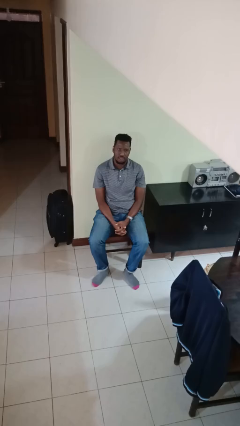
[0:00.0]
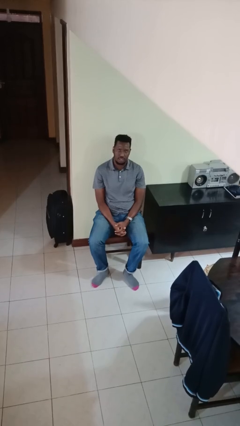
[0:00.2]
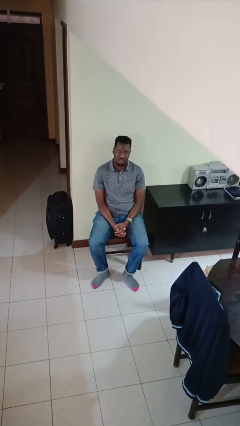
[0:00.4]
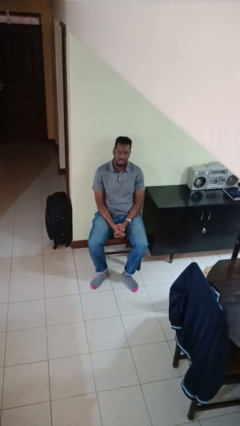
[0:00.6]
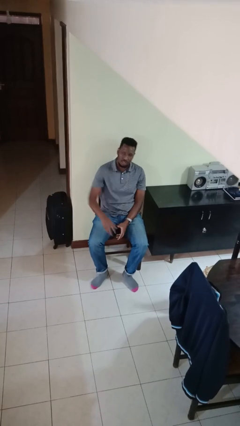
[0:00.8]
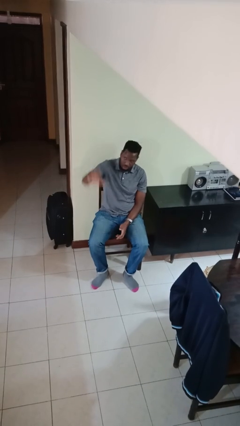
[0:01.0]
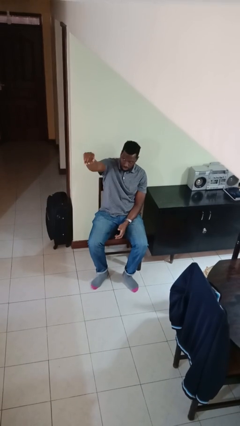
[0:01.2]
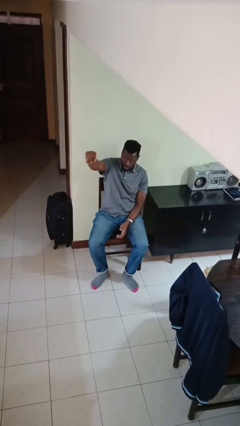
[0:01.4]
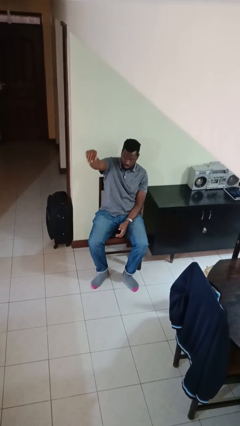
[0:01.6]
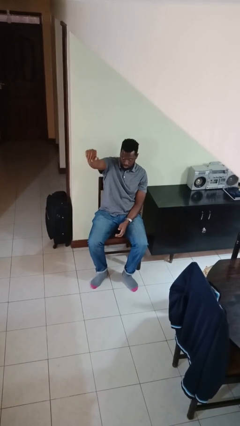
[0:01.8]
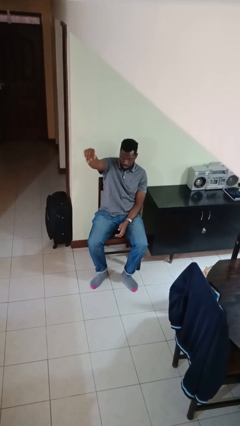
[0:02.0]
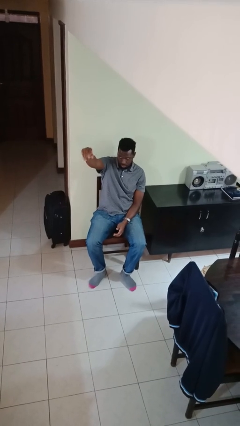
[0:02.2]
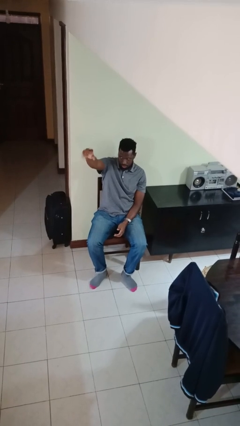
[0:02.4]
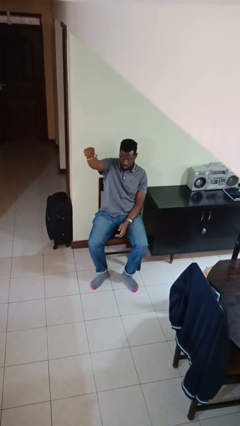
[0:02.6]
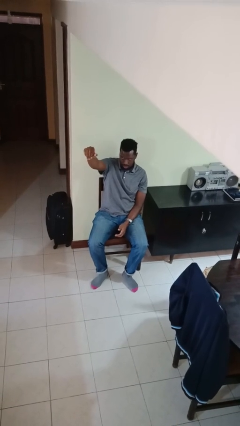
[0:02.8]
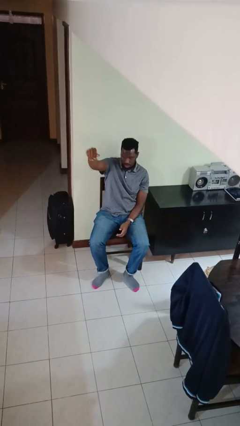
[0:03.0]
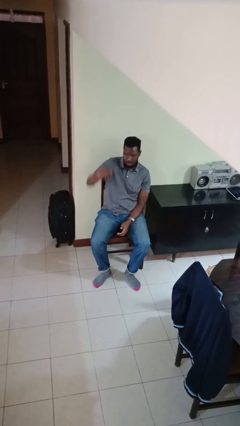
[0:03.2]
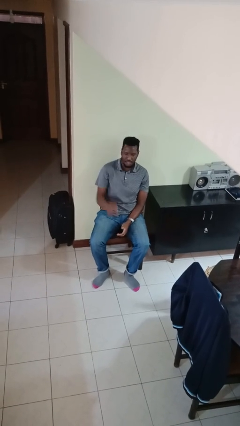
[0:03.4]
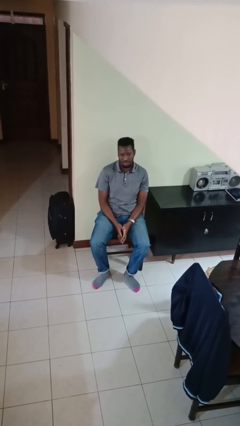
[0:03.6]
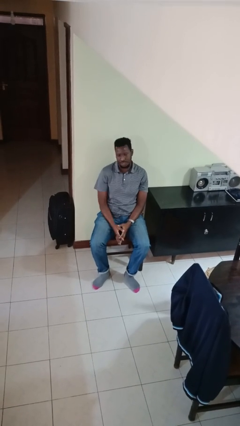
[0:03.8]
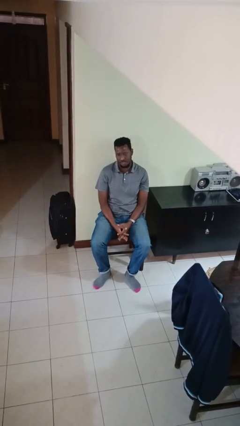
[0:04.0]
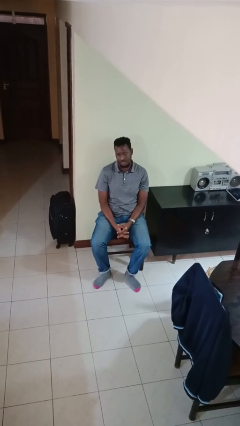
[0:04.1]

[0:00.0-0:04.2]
person gestures come here

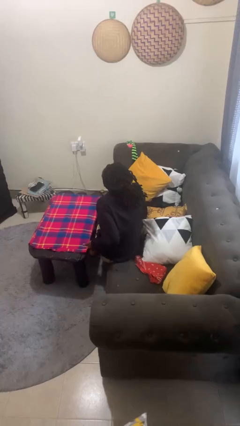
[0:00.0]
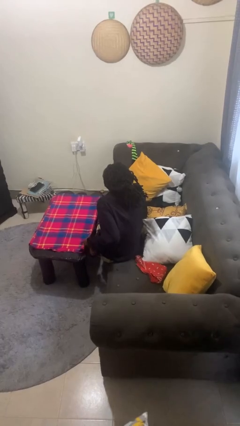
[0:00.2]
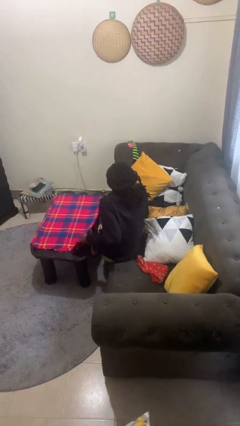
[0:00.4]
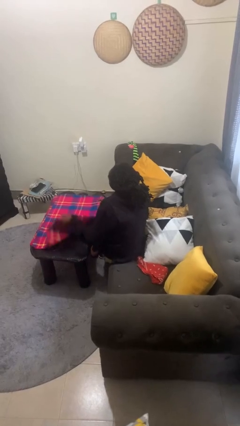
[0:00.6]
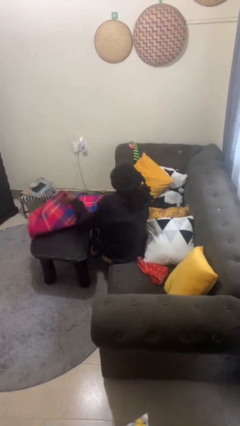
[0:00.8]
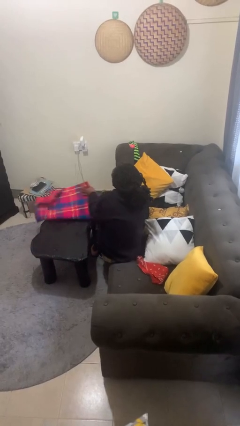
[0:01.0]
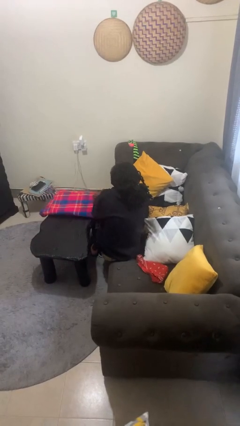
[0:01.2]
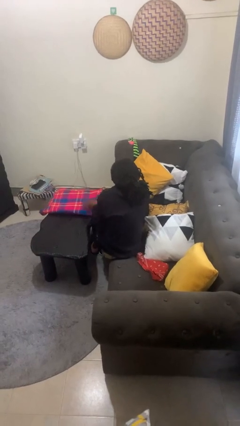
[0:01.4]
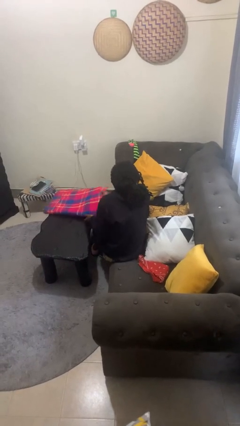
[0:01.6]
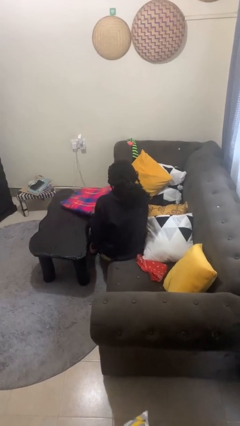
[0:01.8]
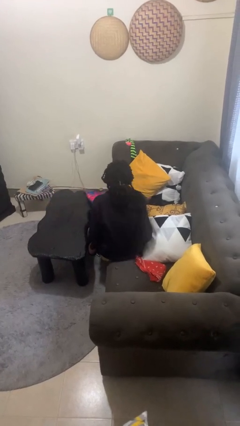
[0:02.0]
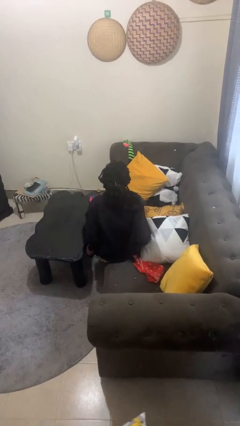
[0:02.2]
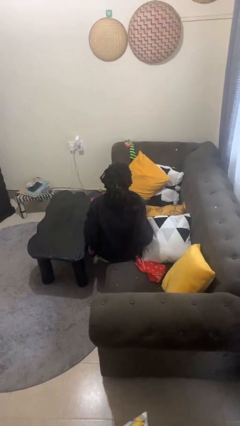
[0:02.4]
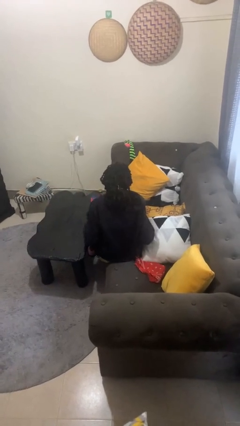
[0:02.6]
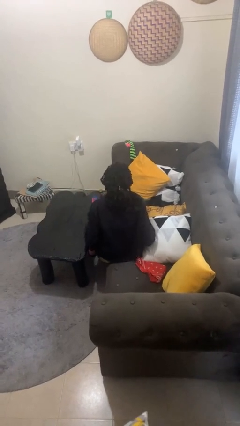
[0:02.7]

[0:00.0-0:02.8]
person folds tablecloth

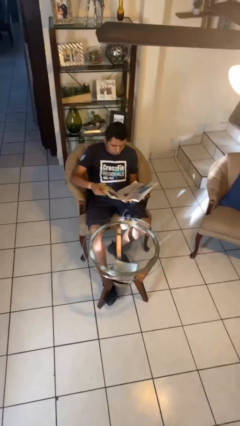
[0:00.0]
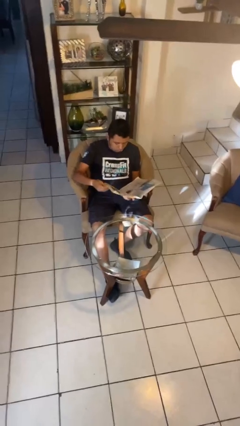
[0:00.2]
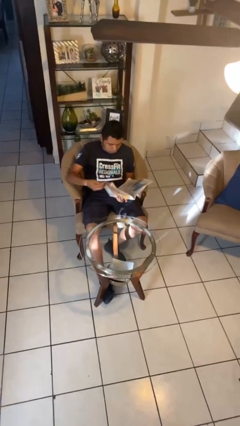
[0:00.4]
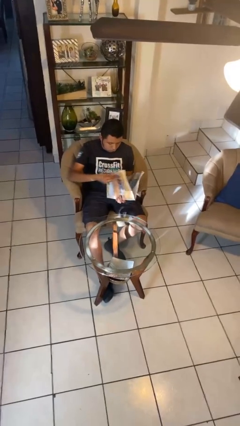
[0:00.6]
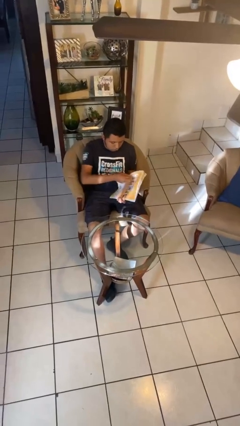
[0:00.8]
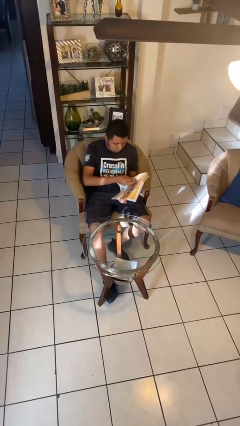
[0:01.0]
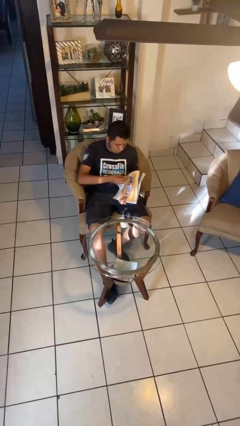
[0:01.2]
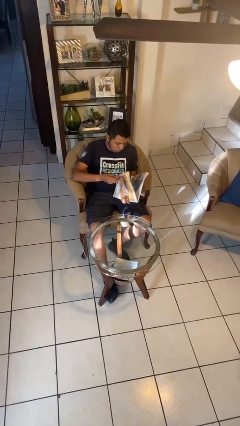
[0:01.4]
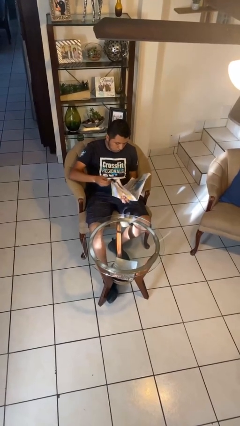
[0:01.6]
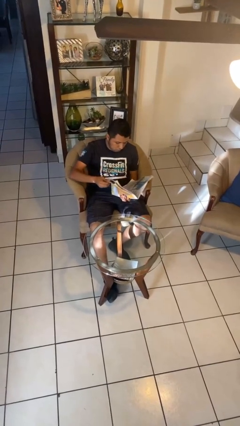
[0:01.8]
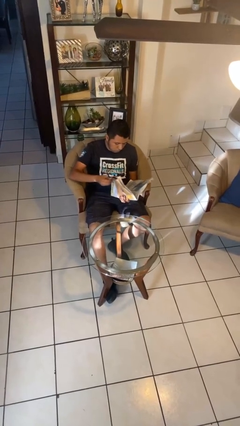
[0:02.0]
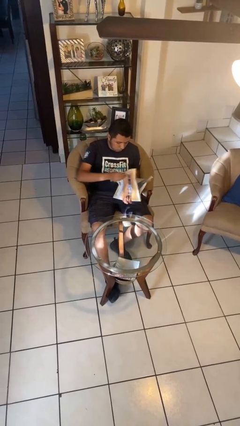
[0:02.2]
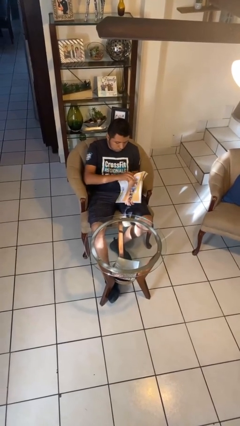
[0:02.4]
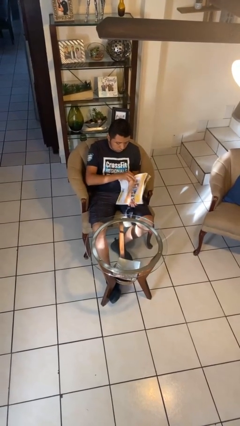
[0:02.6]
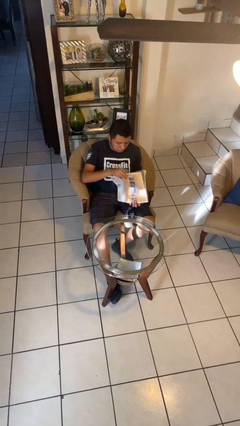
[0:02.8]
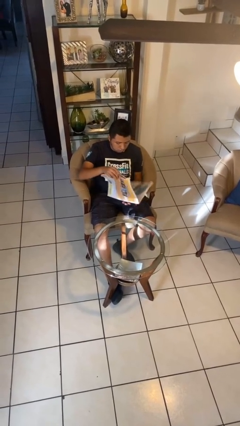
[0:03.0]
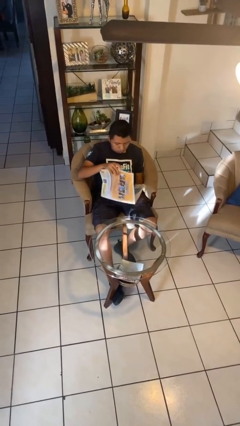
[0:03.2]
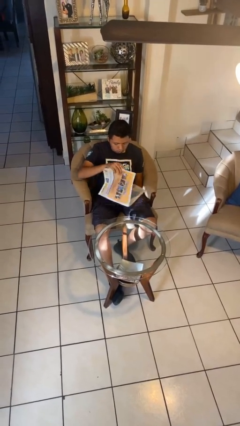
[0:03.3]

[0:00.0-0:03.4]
person reads newspaper

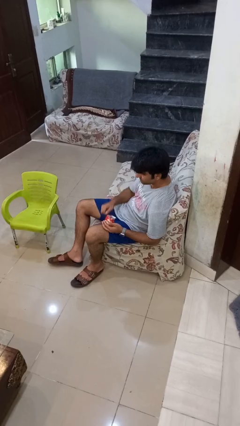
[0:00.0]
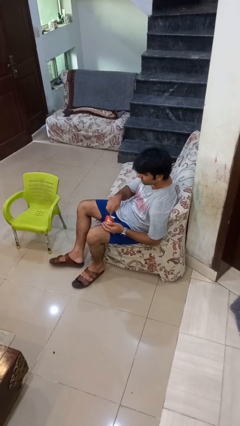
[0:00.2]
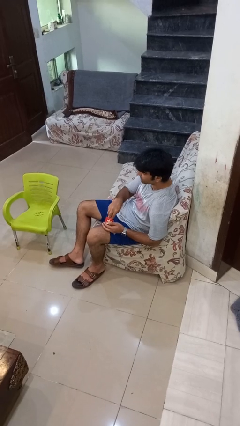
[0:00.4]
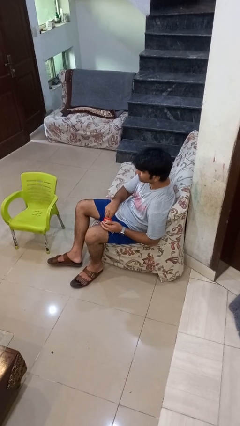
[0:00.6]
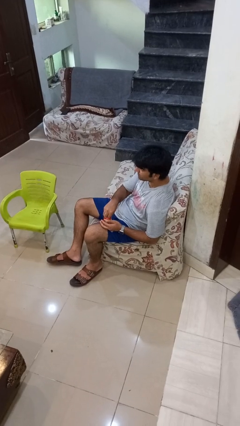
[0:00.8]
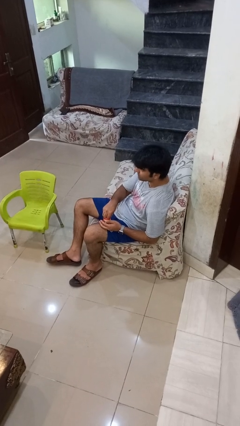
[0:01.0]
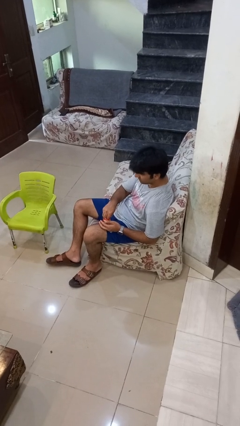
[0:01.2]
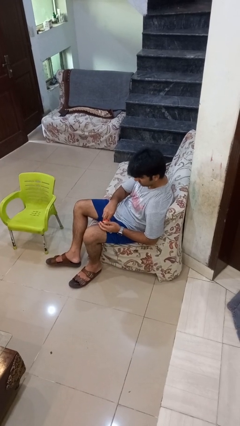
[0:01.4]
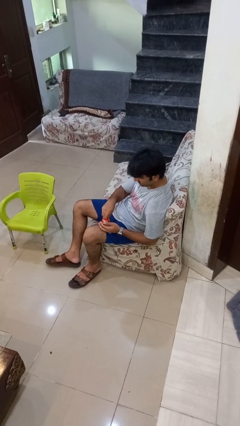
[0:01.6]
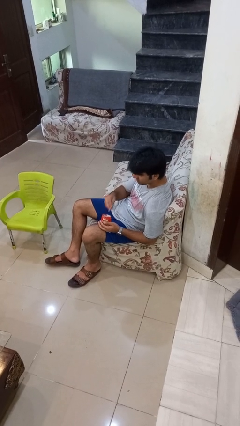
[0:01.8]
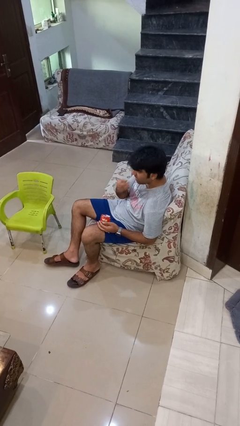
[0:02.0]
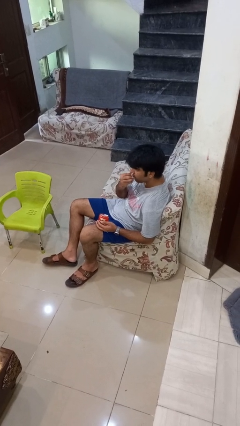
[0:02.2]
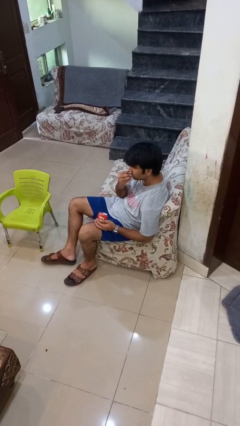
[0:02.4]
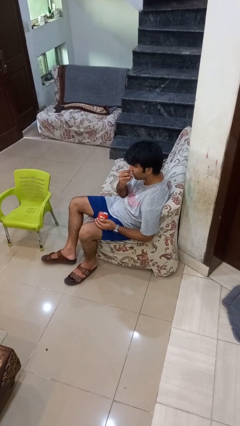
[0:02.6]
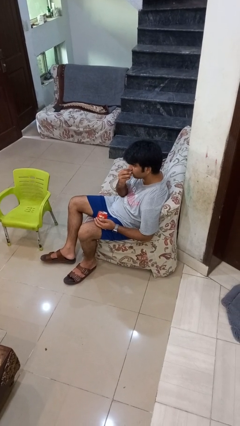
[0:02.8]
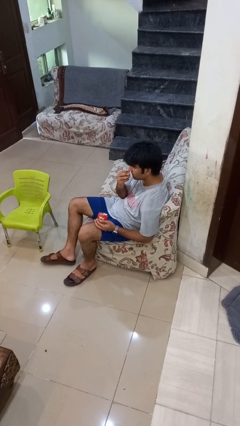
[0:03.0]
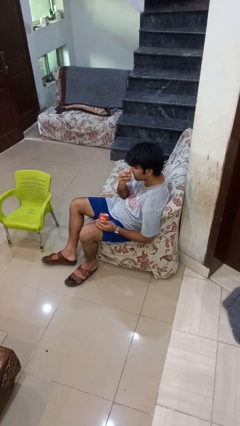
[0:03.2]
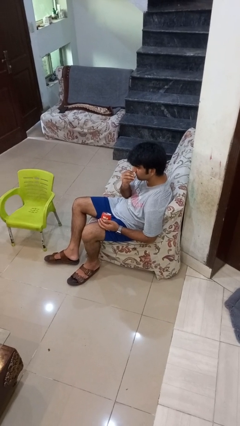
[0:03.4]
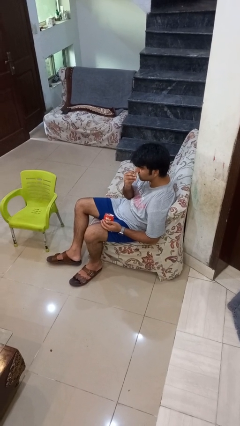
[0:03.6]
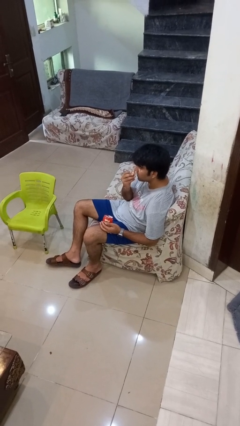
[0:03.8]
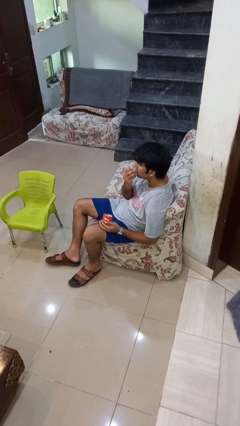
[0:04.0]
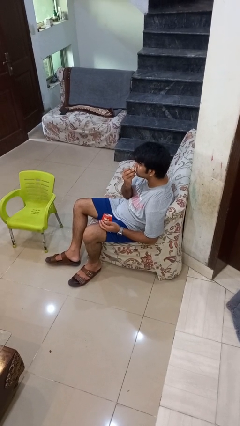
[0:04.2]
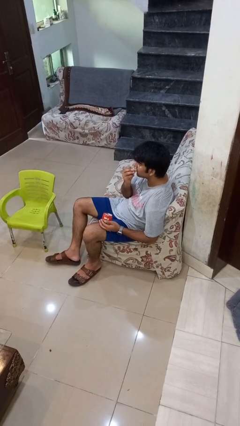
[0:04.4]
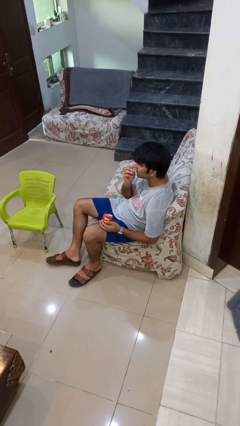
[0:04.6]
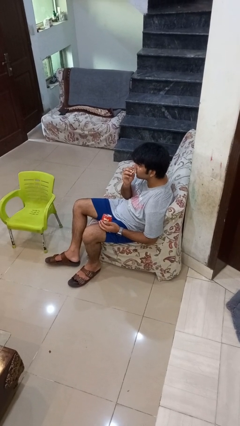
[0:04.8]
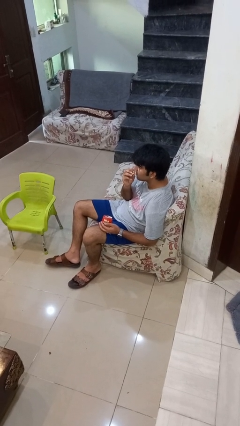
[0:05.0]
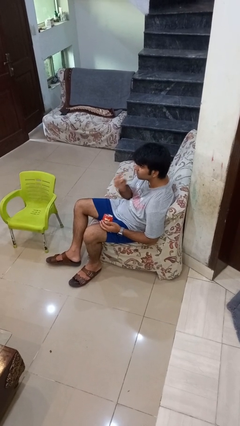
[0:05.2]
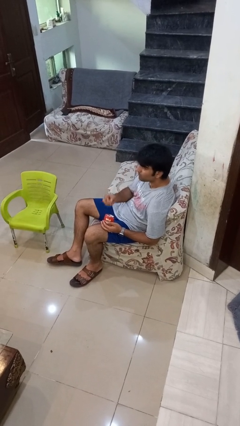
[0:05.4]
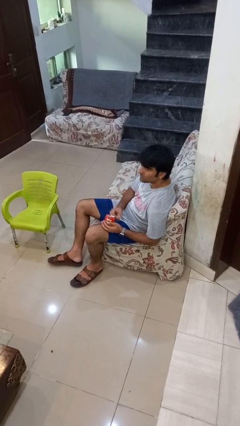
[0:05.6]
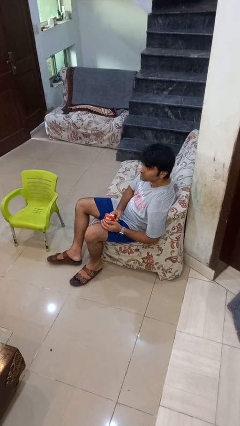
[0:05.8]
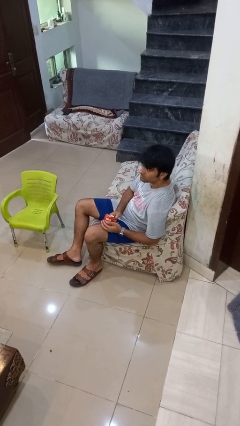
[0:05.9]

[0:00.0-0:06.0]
person eats snack from bag

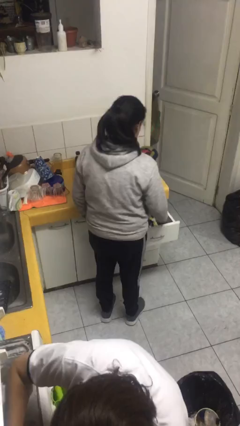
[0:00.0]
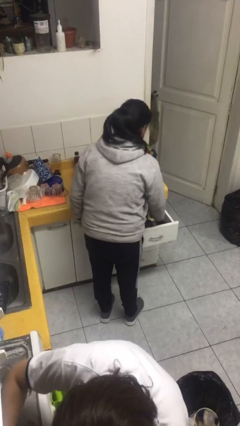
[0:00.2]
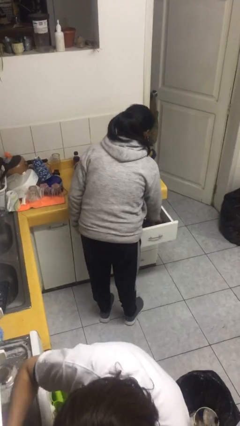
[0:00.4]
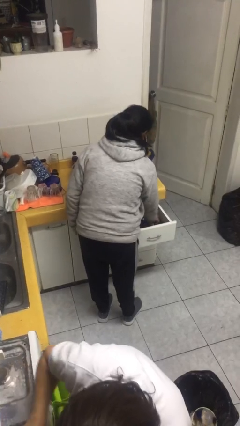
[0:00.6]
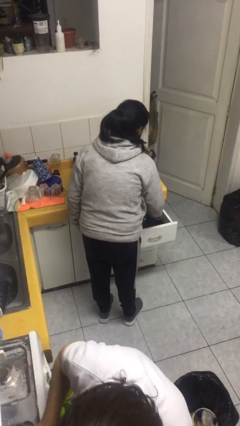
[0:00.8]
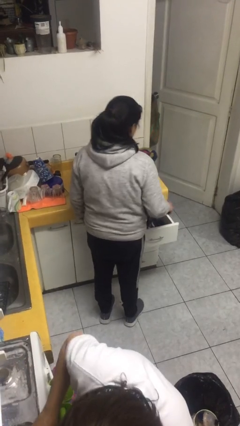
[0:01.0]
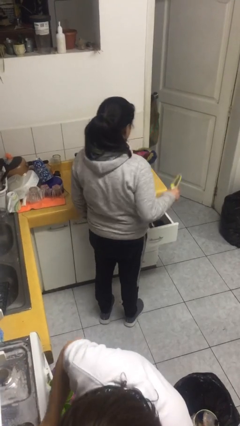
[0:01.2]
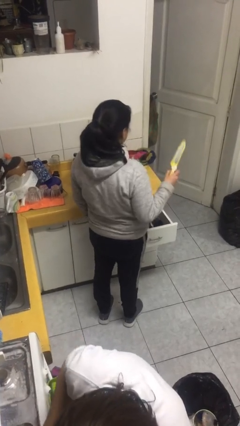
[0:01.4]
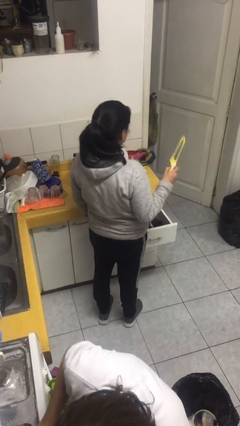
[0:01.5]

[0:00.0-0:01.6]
person takes object from kitchen drawer
